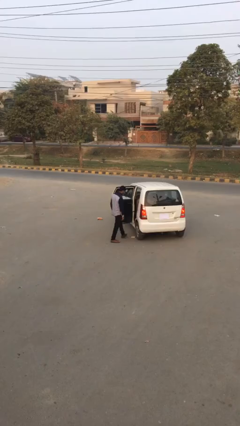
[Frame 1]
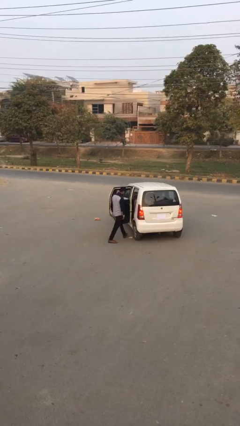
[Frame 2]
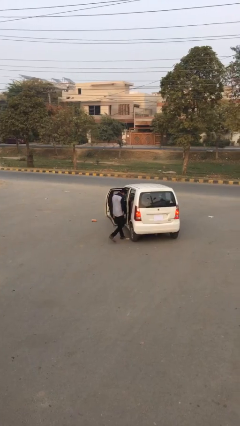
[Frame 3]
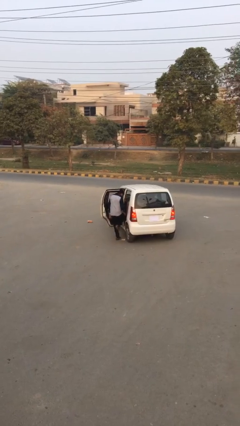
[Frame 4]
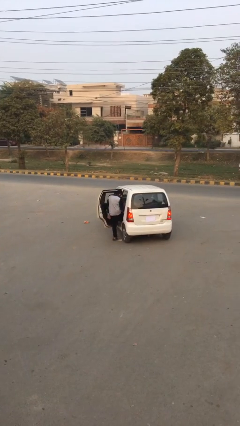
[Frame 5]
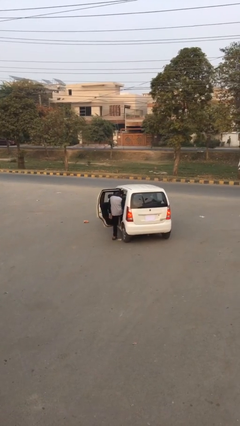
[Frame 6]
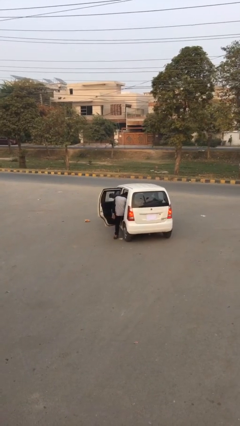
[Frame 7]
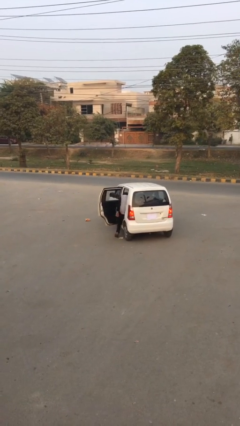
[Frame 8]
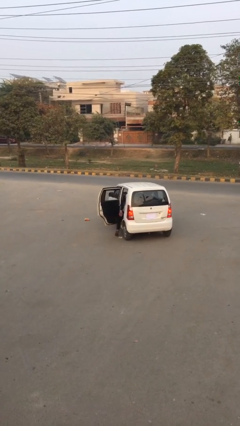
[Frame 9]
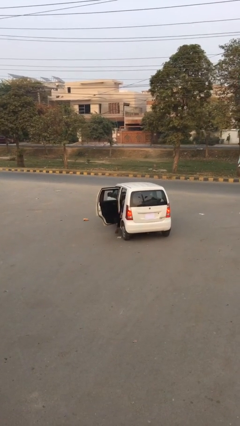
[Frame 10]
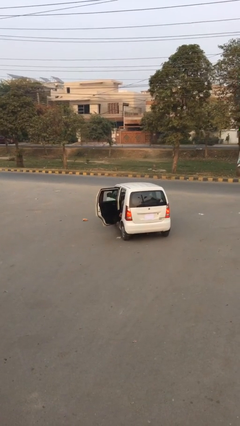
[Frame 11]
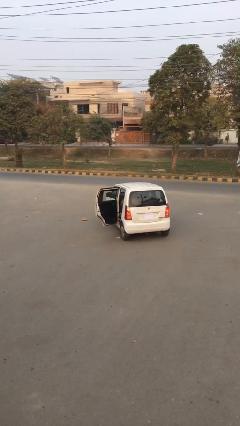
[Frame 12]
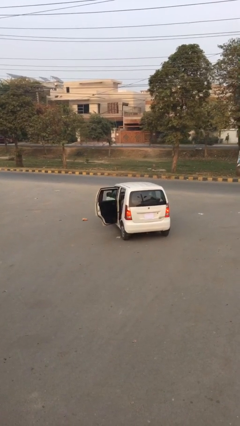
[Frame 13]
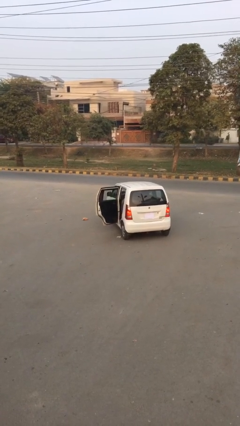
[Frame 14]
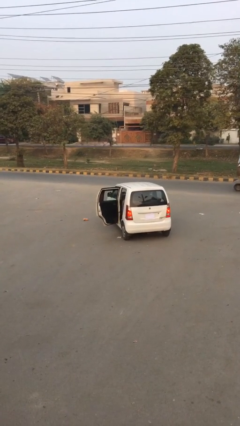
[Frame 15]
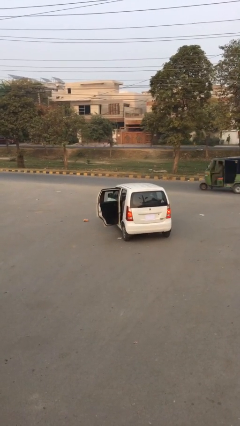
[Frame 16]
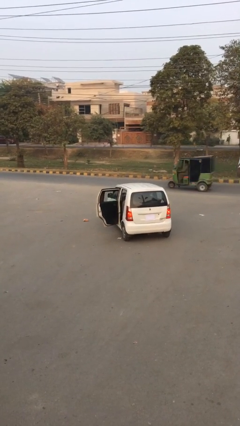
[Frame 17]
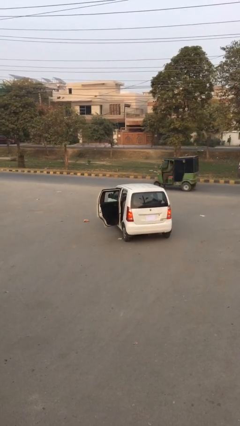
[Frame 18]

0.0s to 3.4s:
person enters car

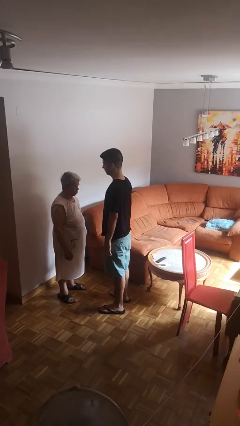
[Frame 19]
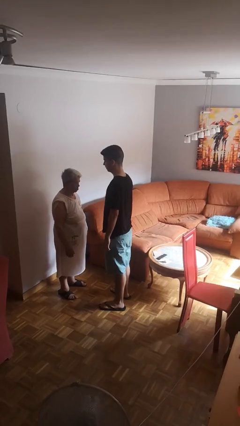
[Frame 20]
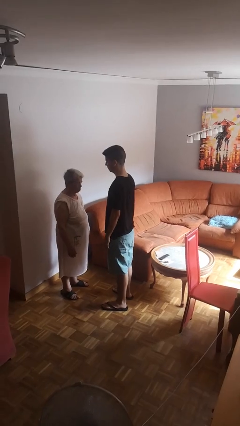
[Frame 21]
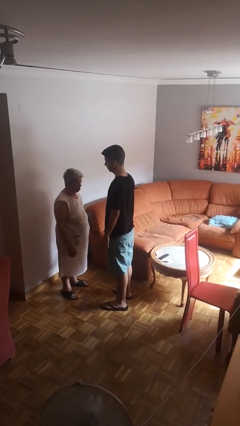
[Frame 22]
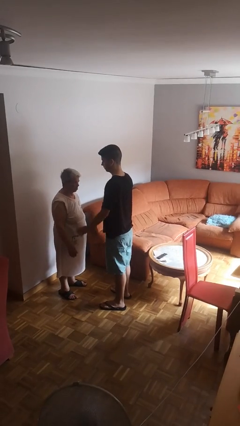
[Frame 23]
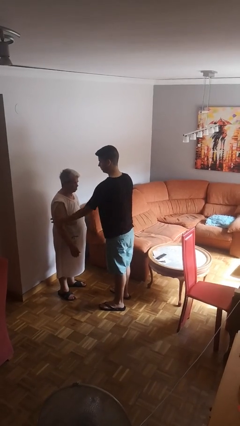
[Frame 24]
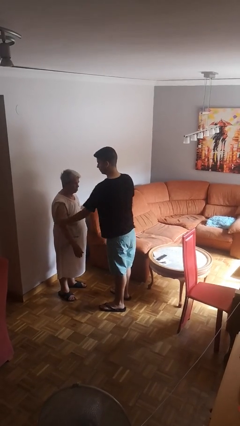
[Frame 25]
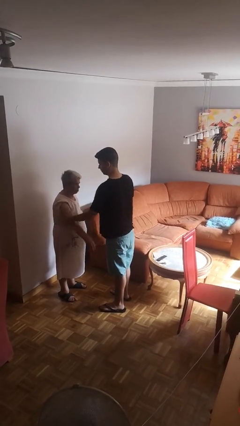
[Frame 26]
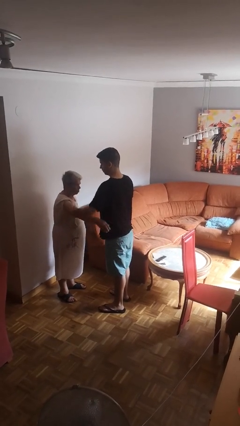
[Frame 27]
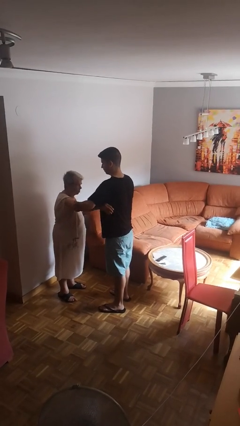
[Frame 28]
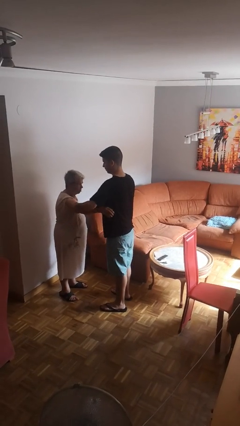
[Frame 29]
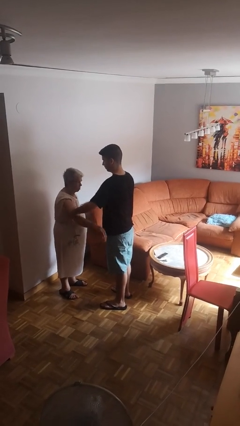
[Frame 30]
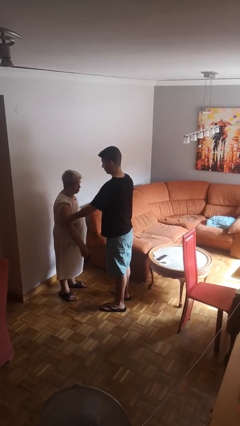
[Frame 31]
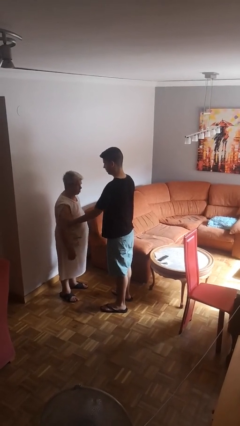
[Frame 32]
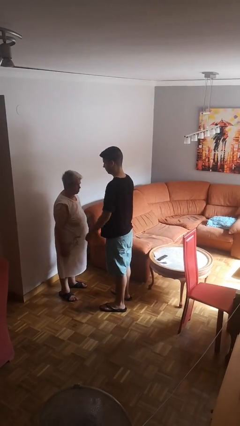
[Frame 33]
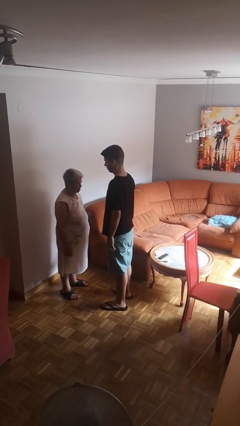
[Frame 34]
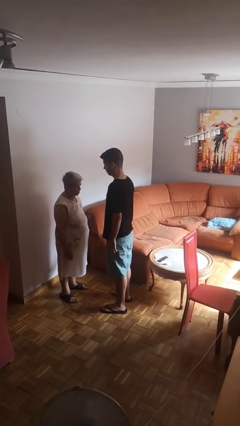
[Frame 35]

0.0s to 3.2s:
person grabs person by bicep

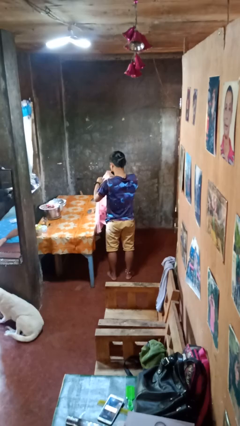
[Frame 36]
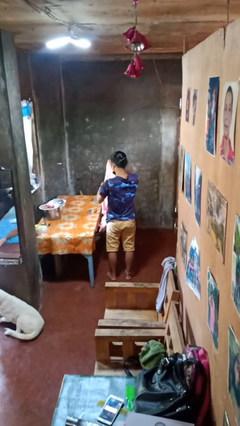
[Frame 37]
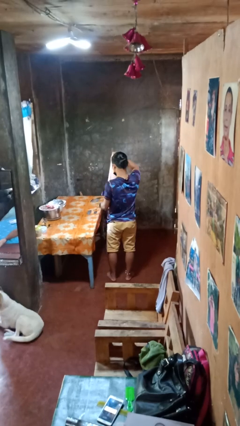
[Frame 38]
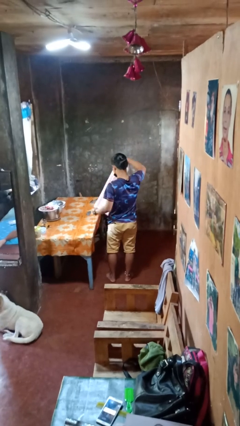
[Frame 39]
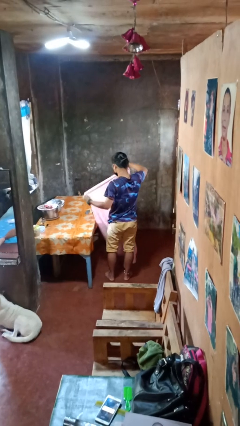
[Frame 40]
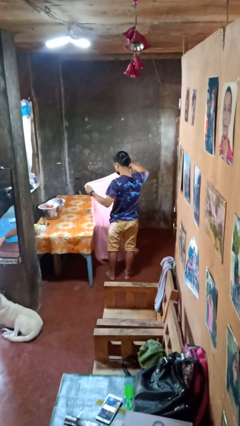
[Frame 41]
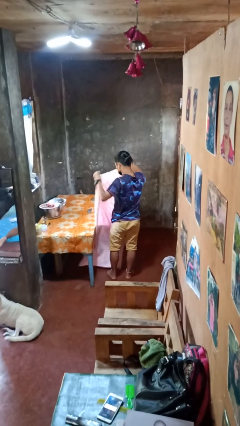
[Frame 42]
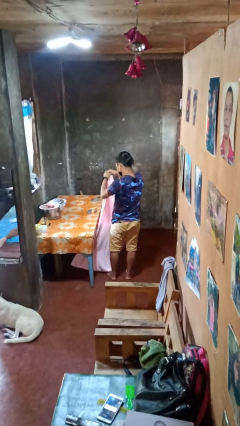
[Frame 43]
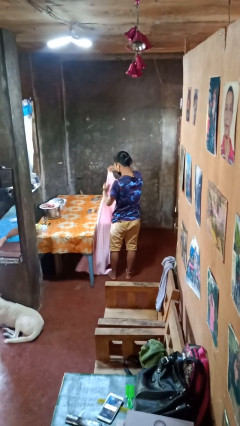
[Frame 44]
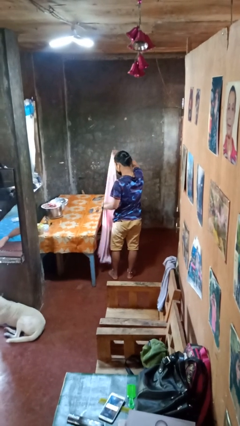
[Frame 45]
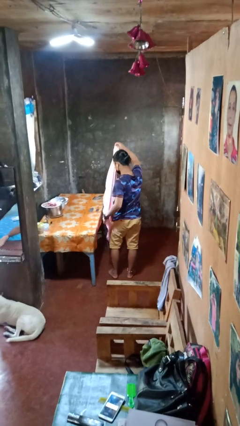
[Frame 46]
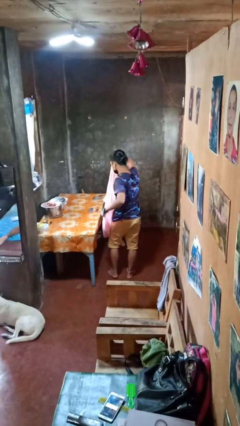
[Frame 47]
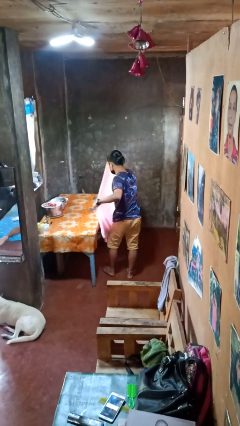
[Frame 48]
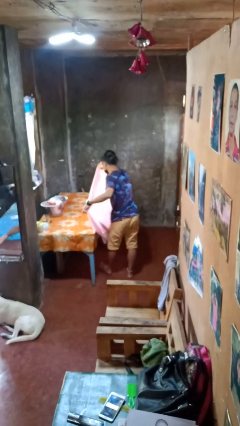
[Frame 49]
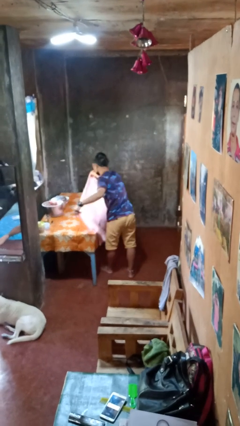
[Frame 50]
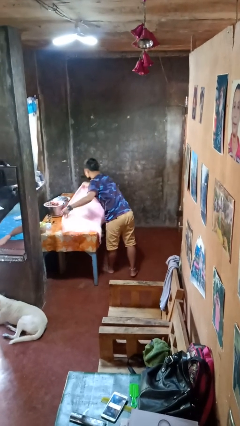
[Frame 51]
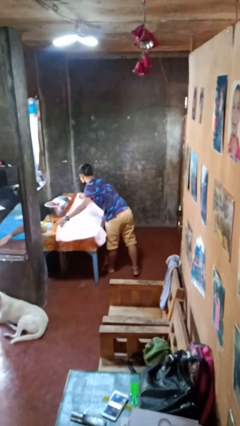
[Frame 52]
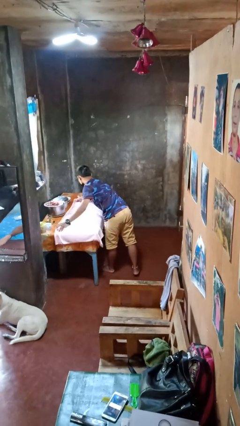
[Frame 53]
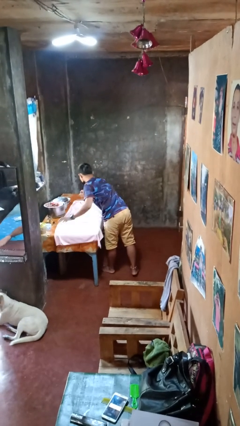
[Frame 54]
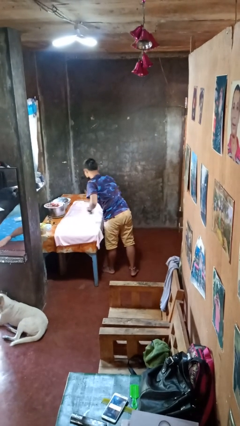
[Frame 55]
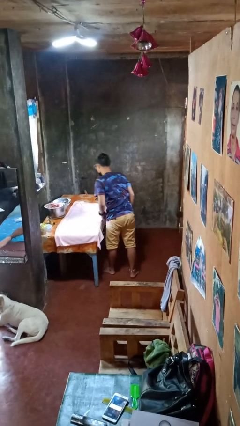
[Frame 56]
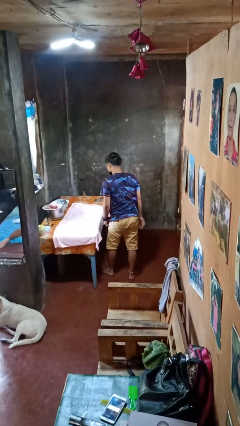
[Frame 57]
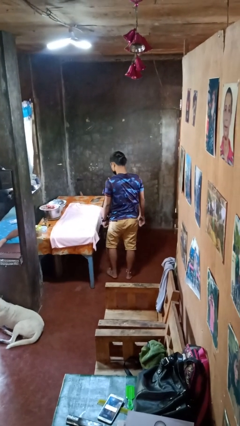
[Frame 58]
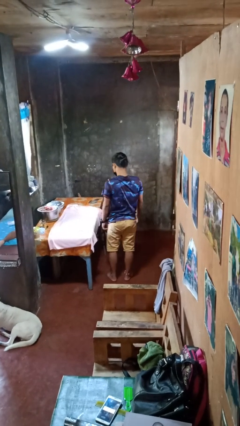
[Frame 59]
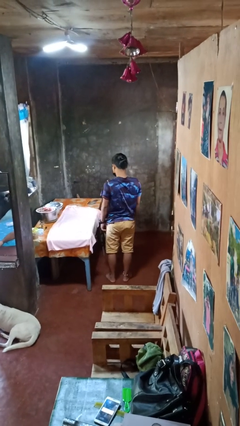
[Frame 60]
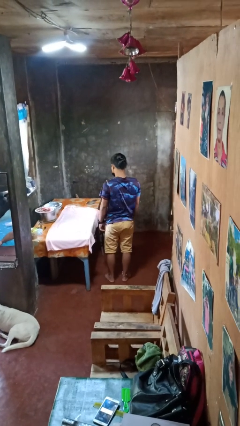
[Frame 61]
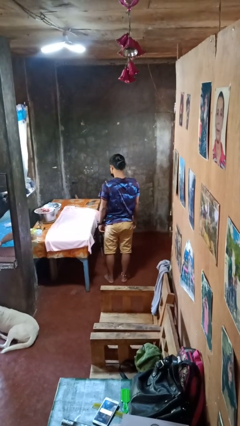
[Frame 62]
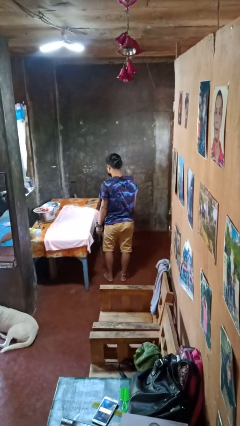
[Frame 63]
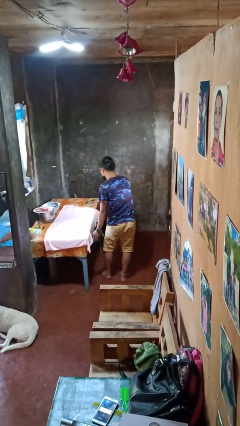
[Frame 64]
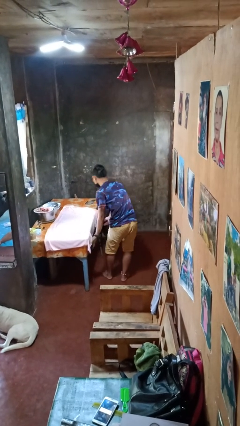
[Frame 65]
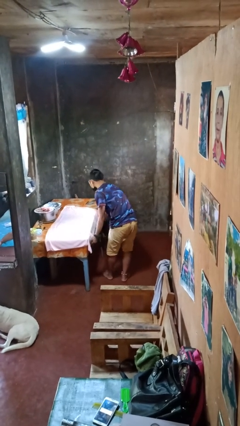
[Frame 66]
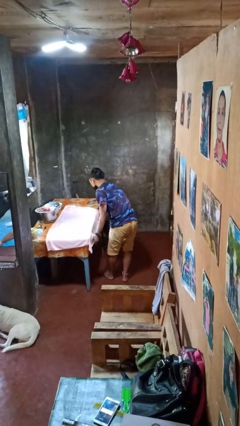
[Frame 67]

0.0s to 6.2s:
person spreads tablecloth

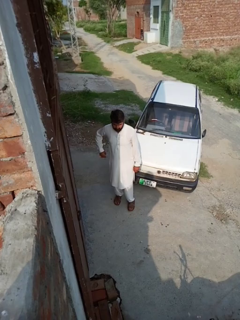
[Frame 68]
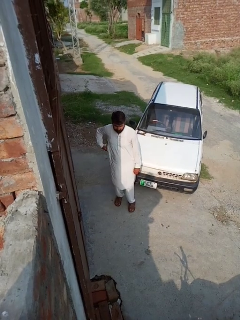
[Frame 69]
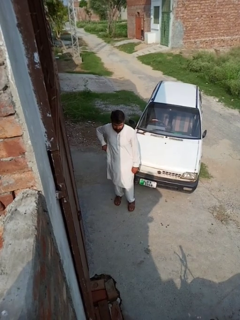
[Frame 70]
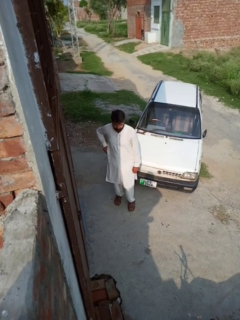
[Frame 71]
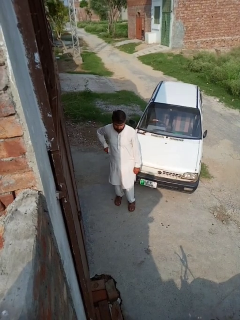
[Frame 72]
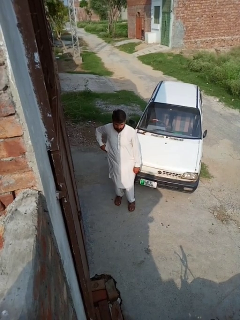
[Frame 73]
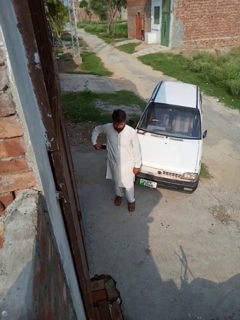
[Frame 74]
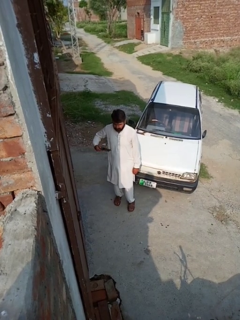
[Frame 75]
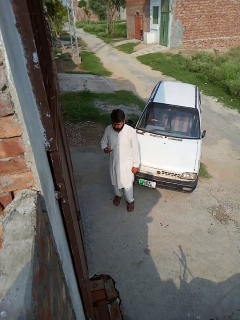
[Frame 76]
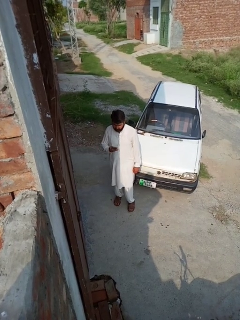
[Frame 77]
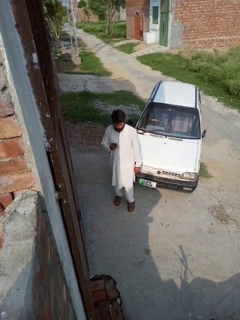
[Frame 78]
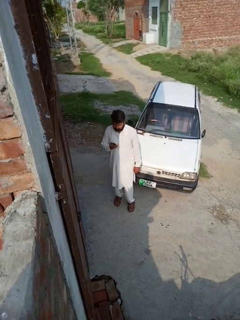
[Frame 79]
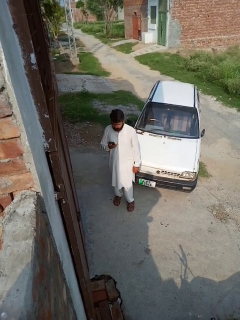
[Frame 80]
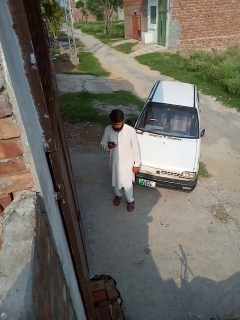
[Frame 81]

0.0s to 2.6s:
person takes phone from pocket

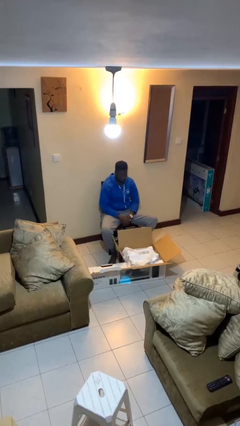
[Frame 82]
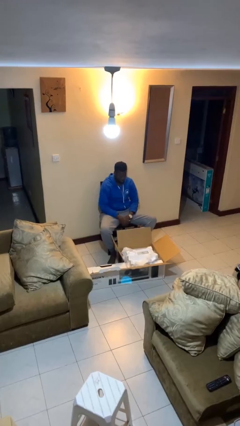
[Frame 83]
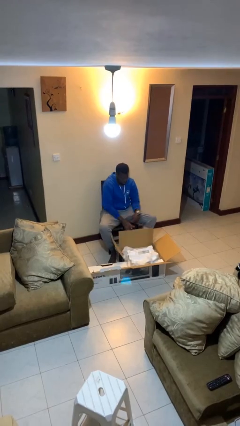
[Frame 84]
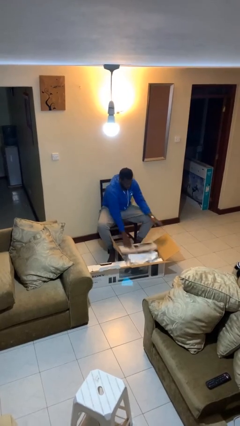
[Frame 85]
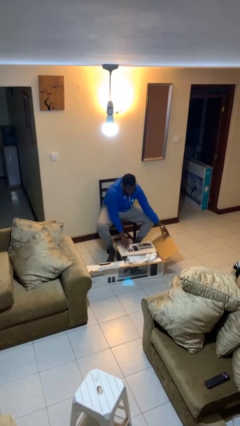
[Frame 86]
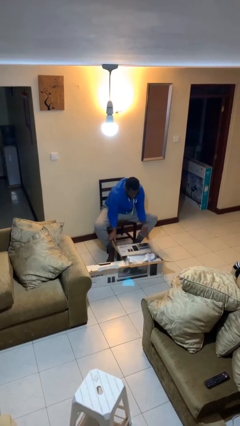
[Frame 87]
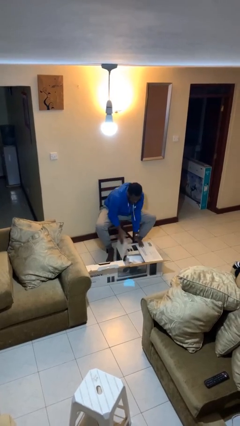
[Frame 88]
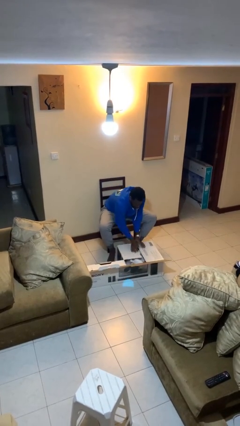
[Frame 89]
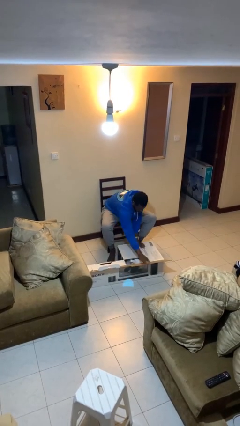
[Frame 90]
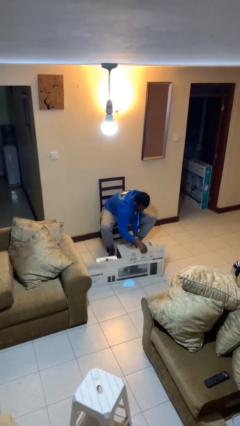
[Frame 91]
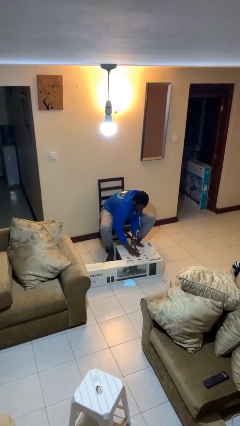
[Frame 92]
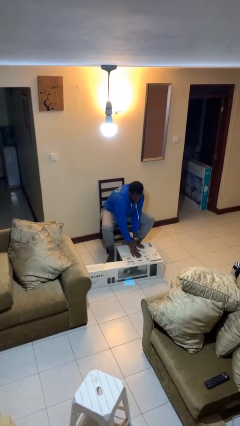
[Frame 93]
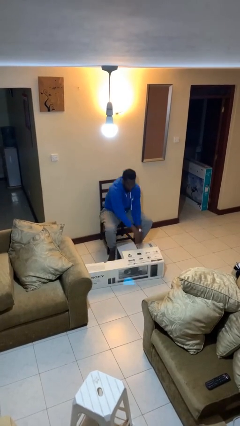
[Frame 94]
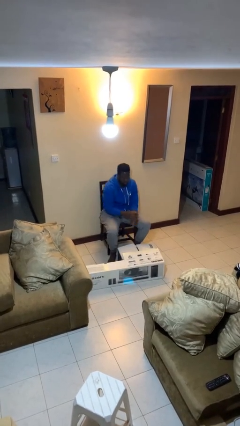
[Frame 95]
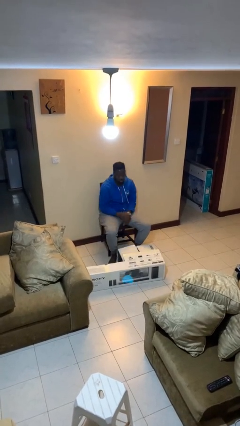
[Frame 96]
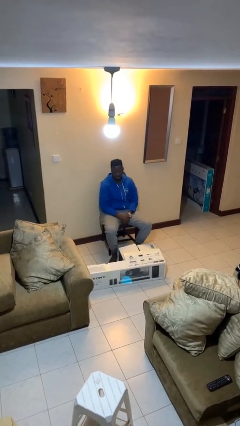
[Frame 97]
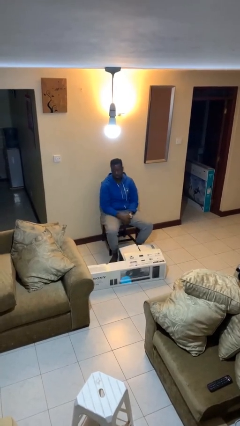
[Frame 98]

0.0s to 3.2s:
person closes box
